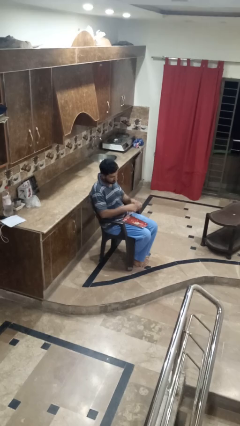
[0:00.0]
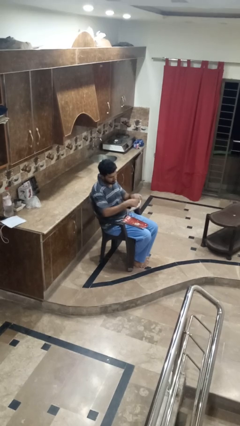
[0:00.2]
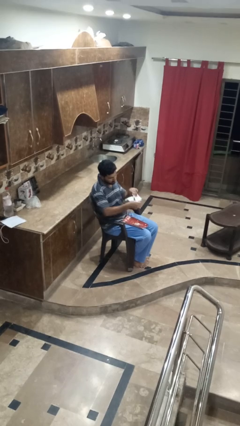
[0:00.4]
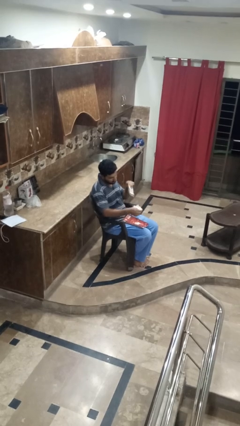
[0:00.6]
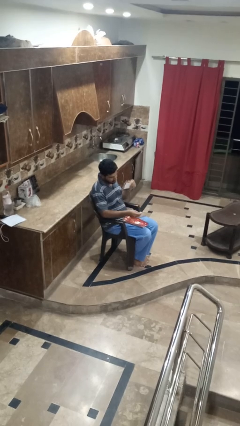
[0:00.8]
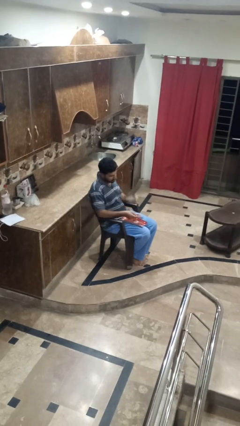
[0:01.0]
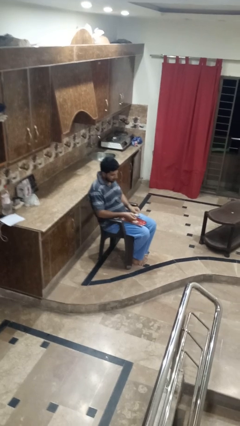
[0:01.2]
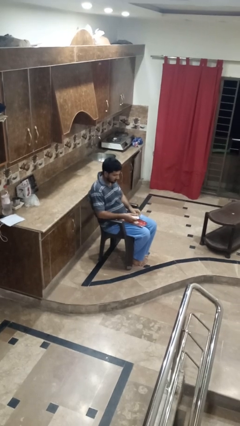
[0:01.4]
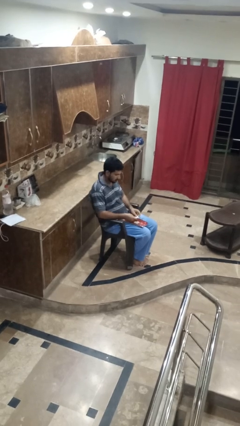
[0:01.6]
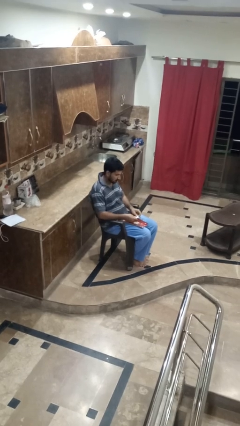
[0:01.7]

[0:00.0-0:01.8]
person tears paper

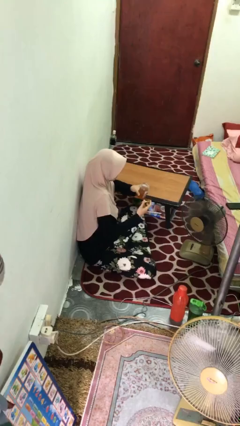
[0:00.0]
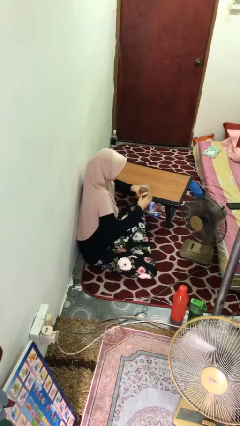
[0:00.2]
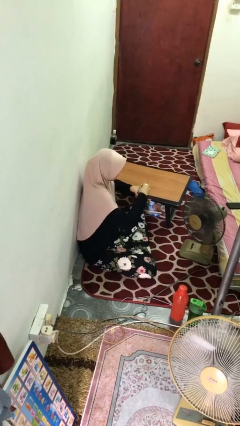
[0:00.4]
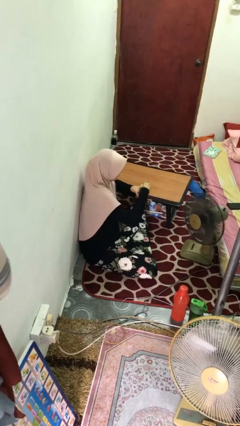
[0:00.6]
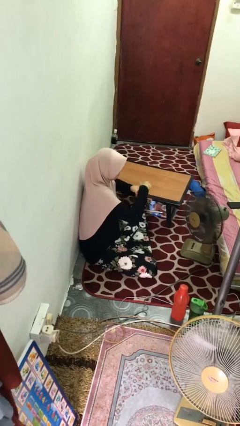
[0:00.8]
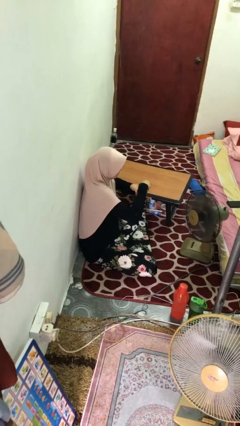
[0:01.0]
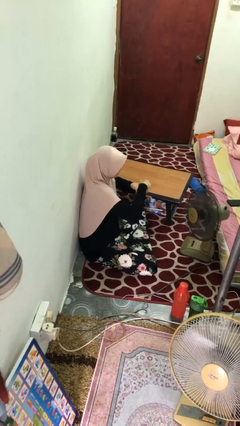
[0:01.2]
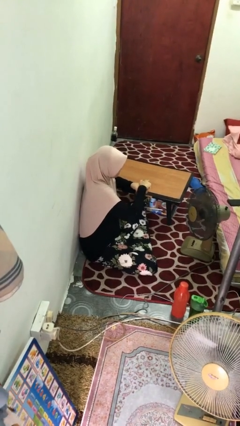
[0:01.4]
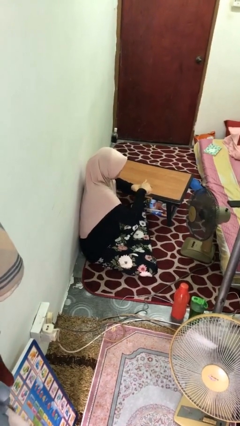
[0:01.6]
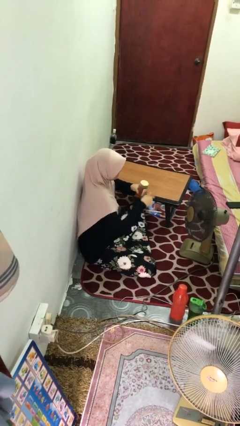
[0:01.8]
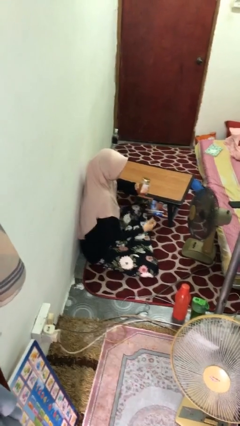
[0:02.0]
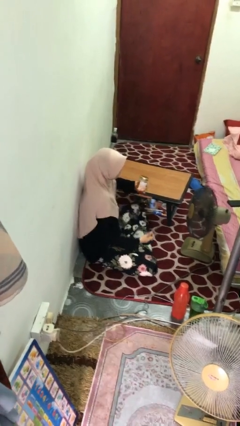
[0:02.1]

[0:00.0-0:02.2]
person closes jar

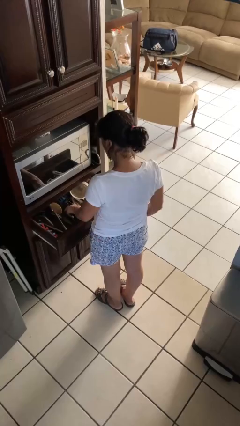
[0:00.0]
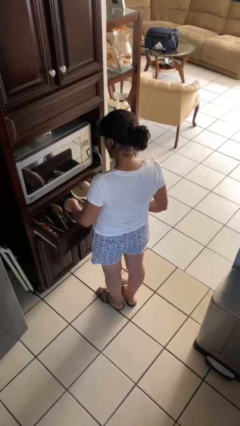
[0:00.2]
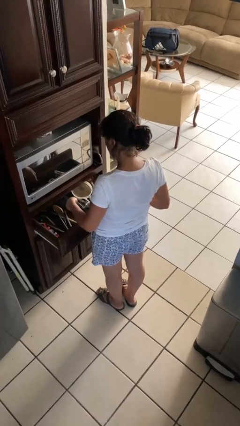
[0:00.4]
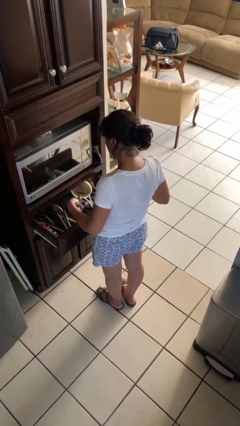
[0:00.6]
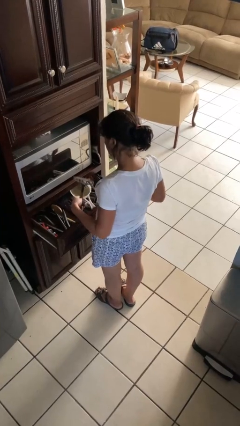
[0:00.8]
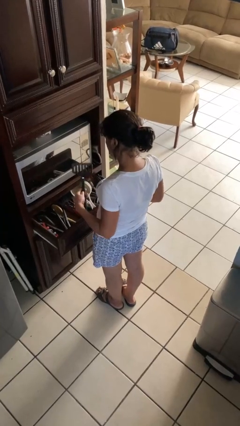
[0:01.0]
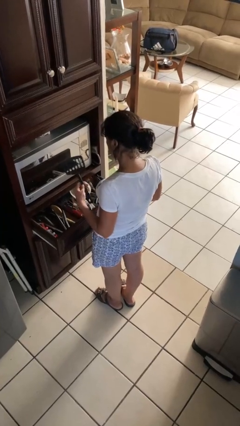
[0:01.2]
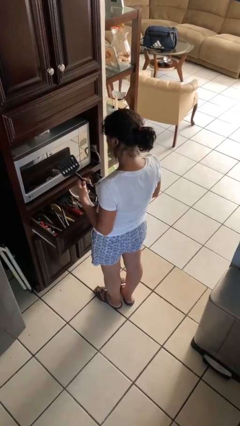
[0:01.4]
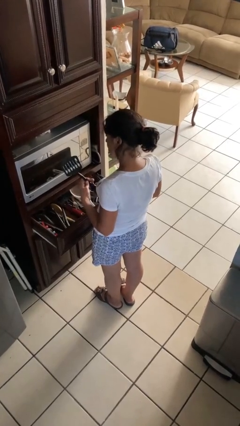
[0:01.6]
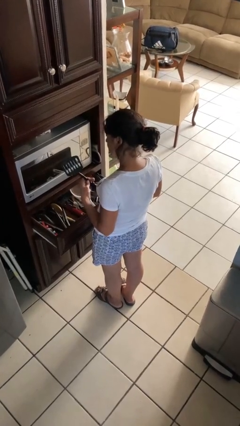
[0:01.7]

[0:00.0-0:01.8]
person takes object from kitchen drawer

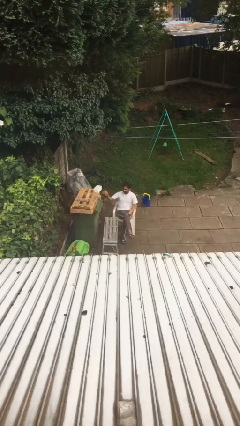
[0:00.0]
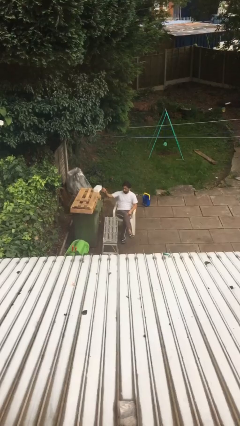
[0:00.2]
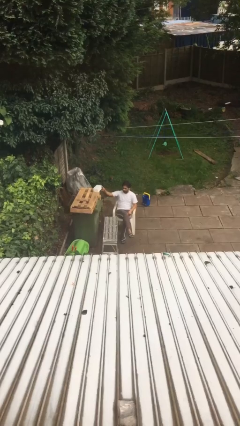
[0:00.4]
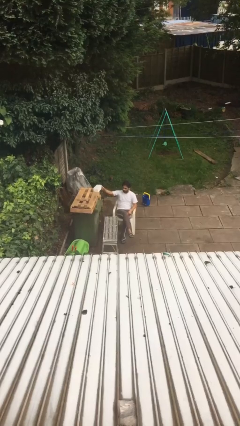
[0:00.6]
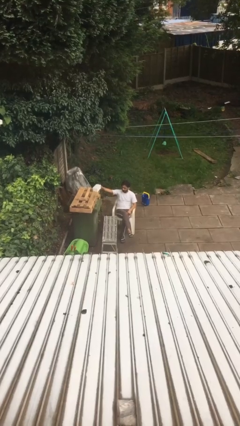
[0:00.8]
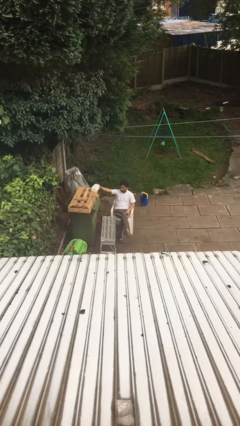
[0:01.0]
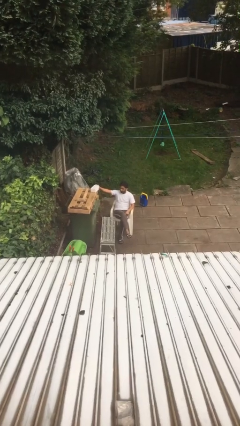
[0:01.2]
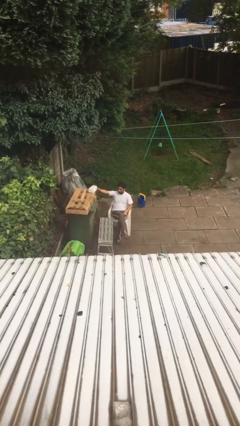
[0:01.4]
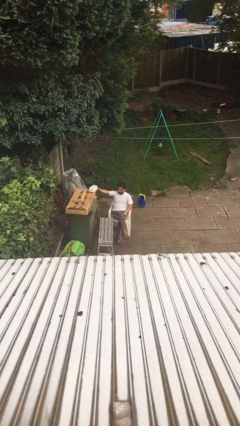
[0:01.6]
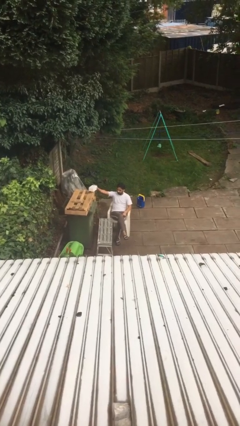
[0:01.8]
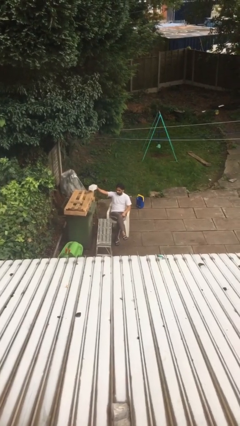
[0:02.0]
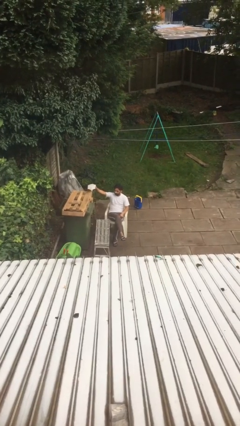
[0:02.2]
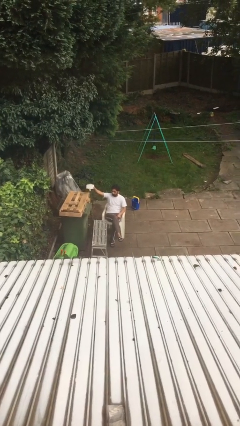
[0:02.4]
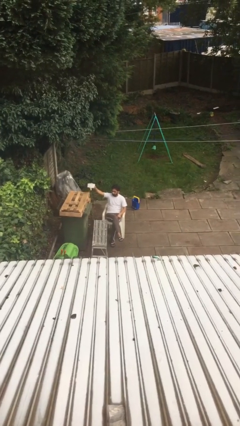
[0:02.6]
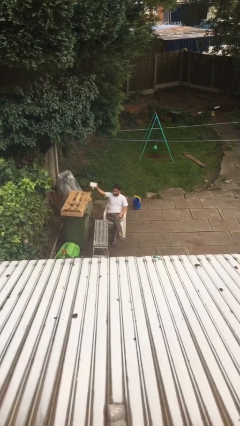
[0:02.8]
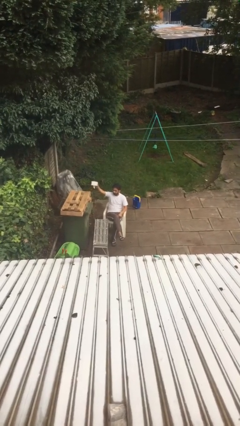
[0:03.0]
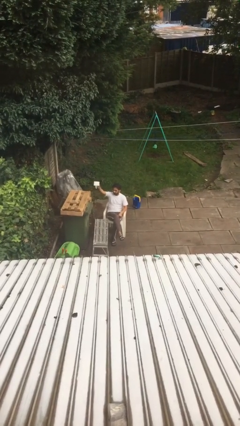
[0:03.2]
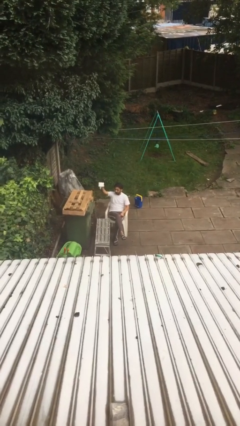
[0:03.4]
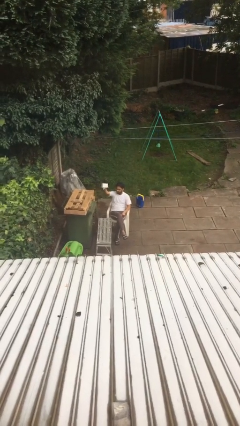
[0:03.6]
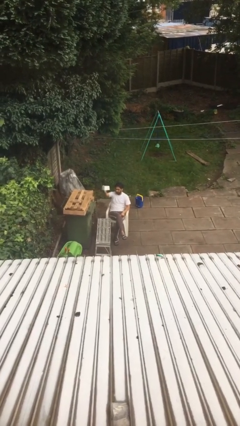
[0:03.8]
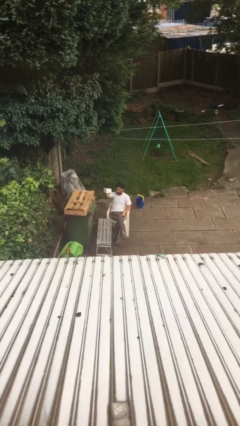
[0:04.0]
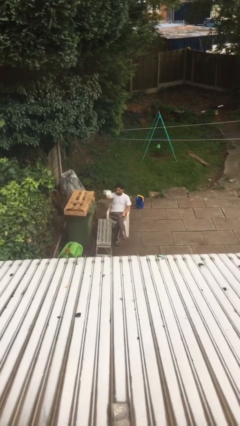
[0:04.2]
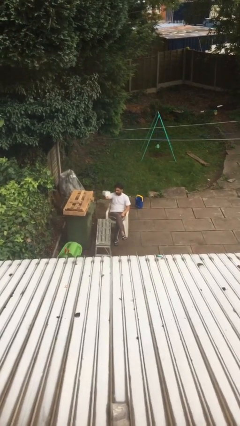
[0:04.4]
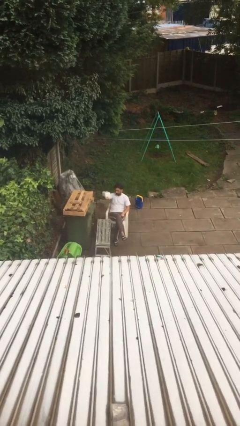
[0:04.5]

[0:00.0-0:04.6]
person picks up object from shelf

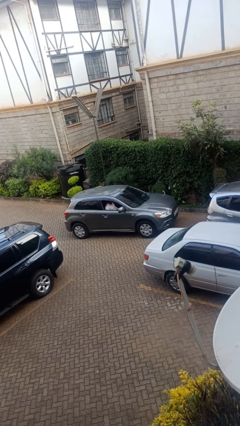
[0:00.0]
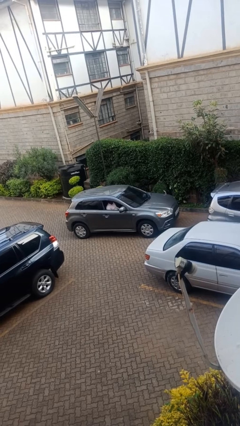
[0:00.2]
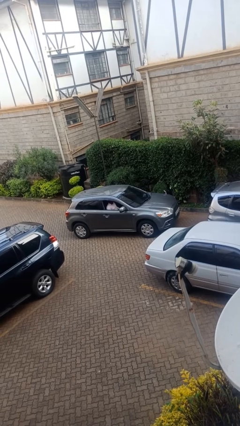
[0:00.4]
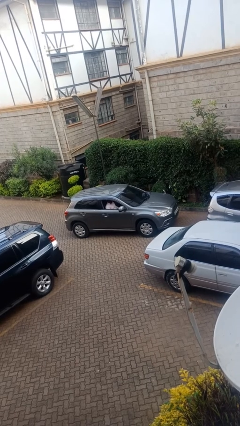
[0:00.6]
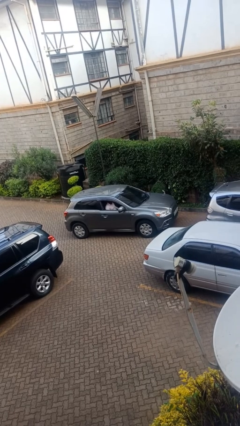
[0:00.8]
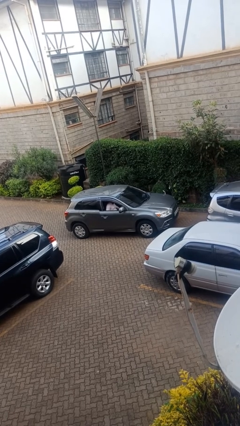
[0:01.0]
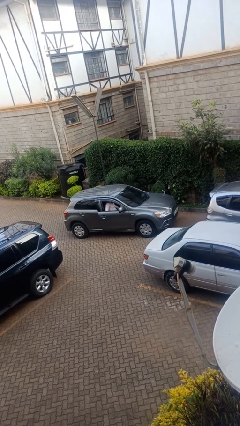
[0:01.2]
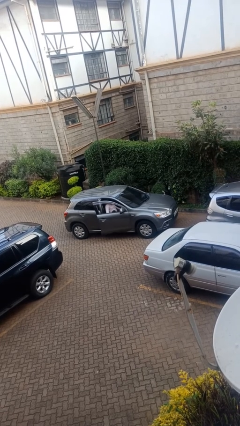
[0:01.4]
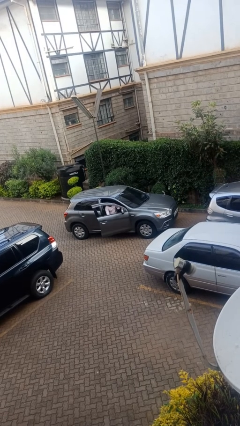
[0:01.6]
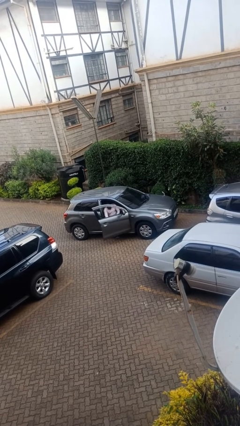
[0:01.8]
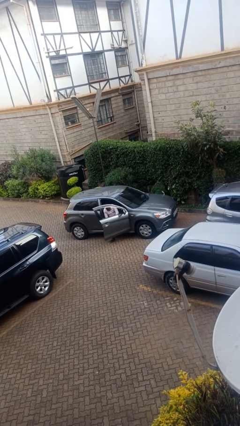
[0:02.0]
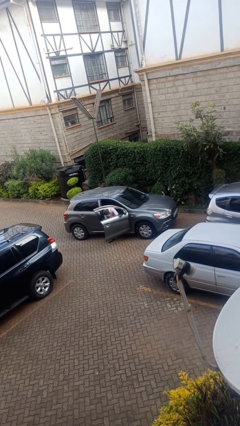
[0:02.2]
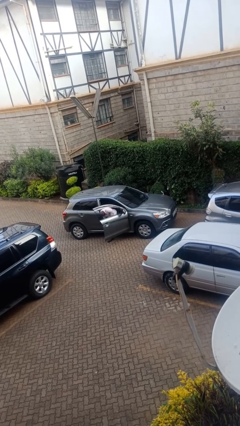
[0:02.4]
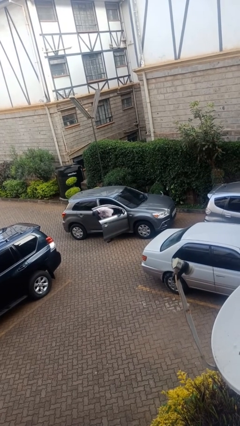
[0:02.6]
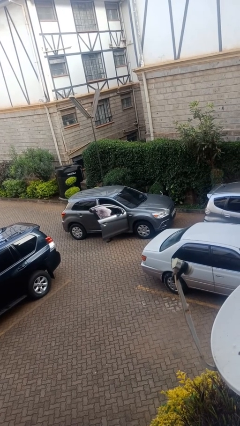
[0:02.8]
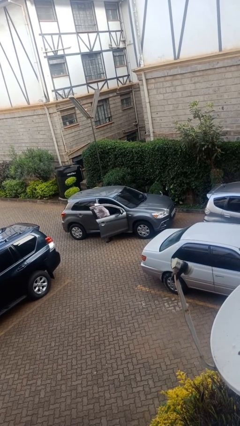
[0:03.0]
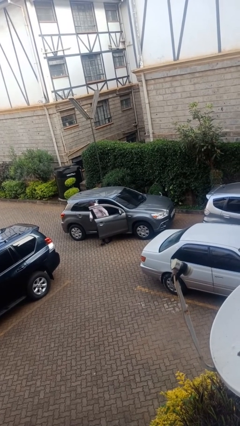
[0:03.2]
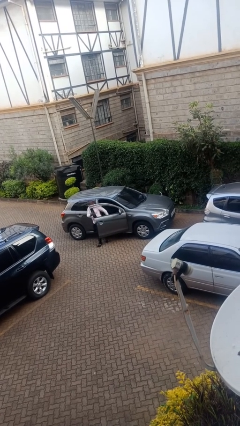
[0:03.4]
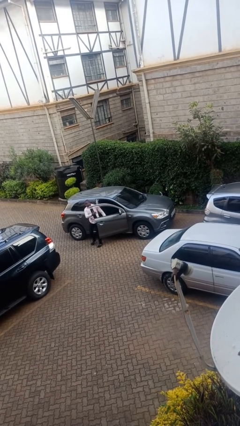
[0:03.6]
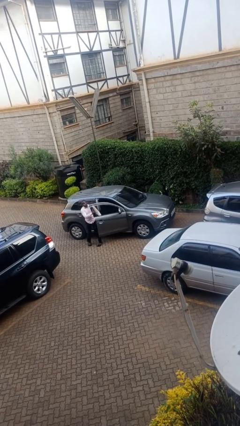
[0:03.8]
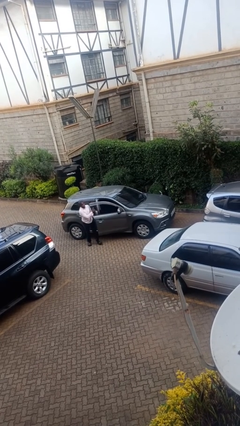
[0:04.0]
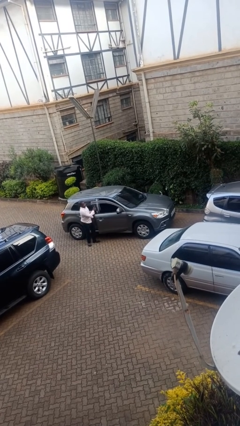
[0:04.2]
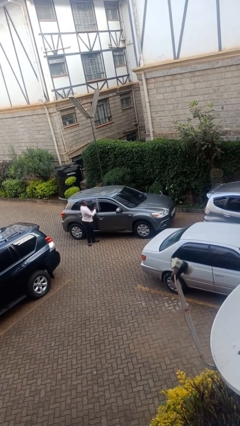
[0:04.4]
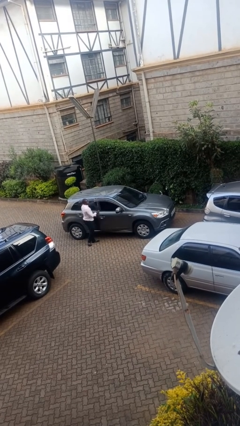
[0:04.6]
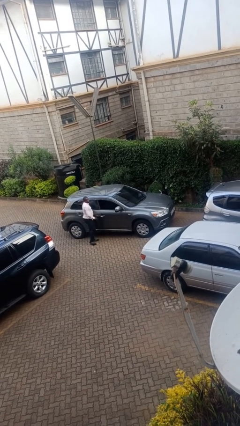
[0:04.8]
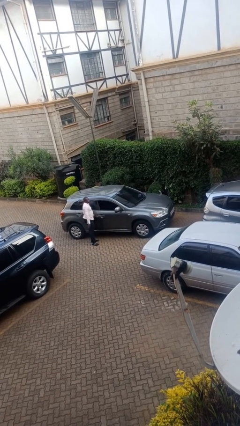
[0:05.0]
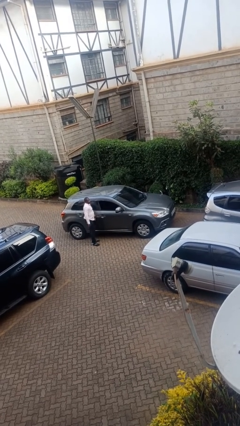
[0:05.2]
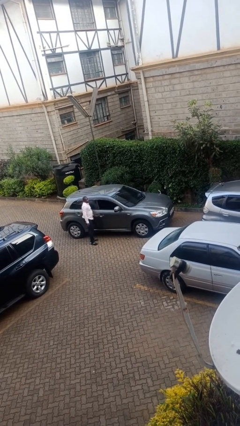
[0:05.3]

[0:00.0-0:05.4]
car drops off person

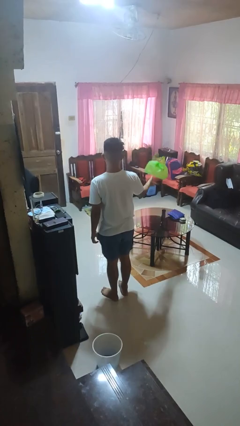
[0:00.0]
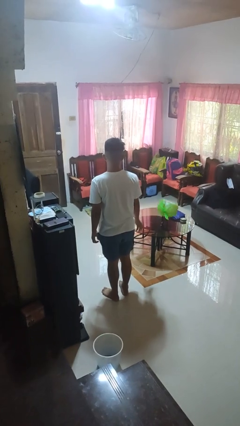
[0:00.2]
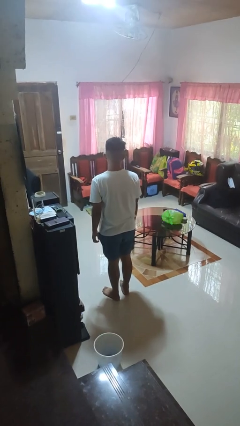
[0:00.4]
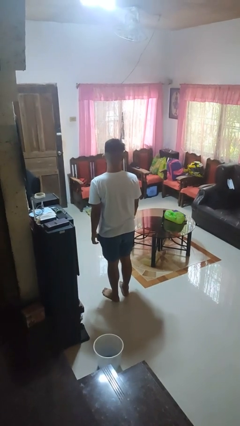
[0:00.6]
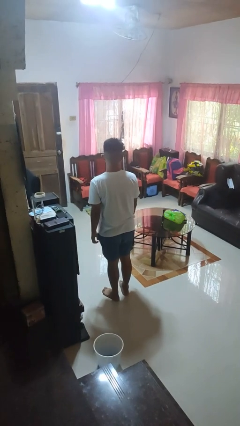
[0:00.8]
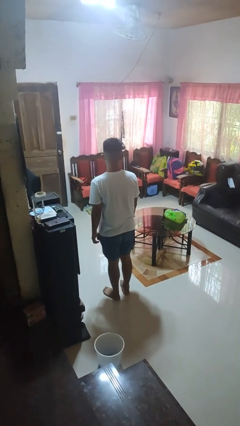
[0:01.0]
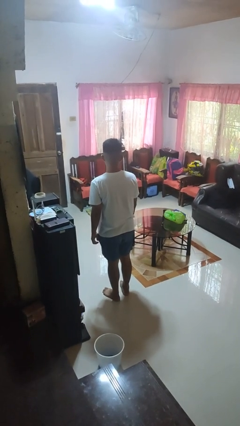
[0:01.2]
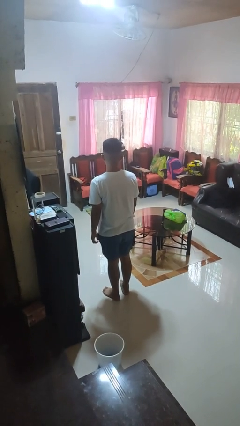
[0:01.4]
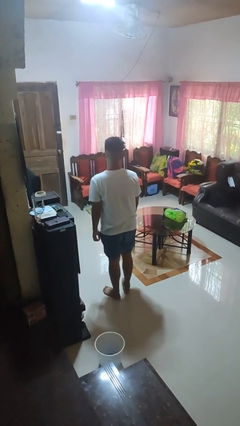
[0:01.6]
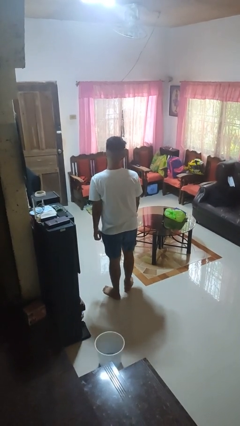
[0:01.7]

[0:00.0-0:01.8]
person throws object on table
